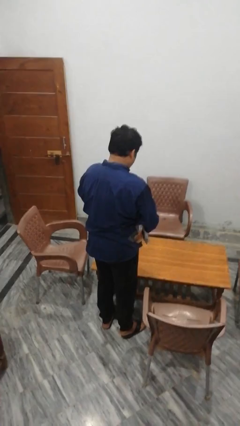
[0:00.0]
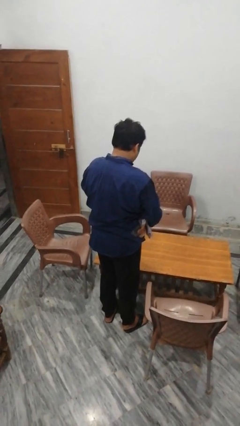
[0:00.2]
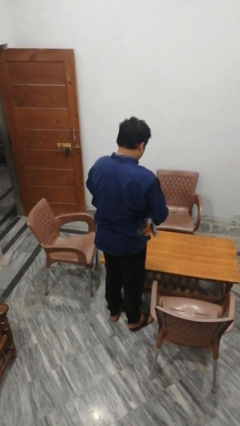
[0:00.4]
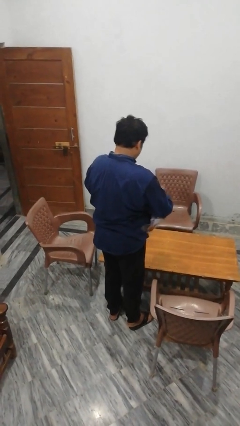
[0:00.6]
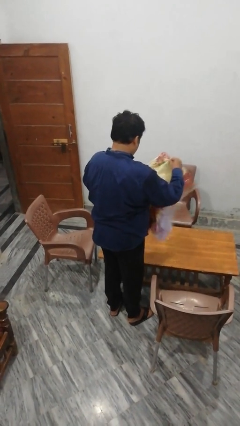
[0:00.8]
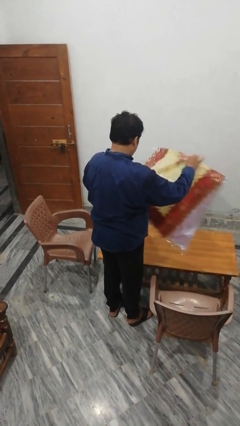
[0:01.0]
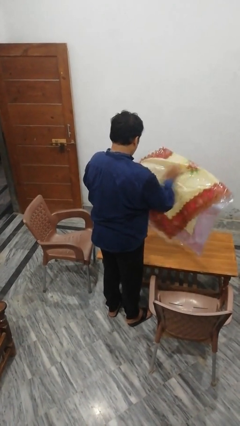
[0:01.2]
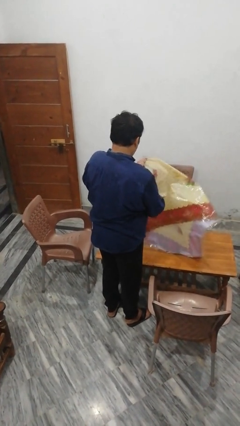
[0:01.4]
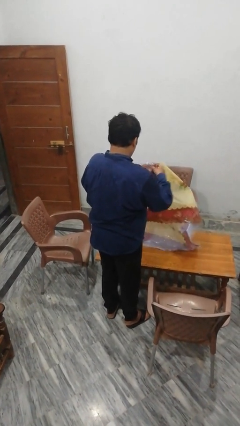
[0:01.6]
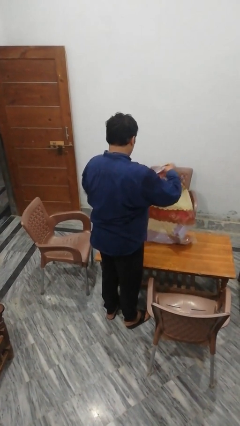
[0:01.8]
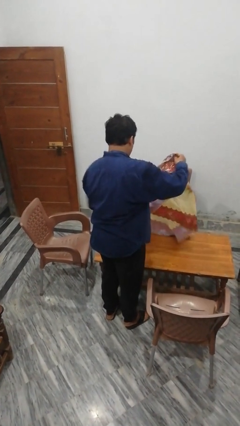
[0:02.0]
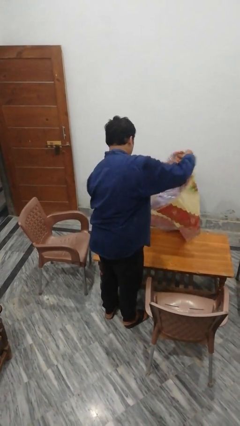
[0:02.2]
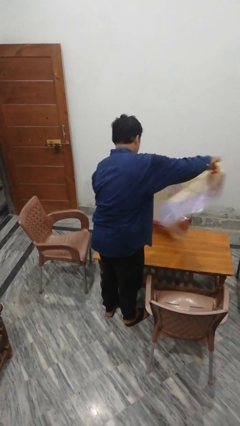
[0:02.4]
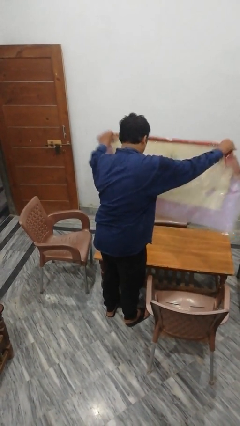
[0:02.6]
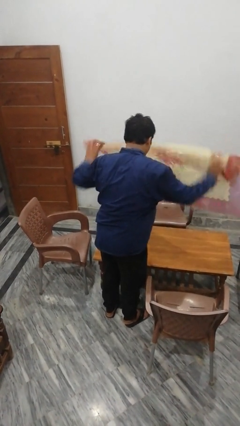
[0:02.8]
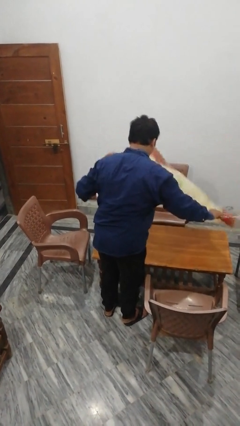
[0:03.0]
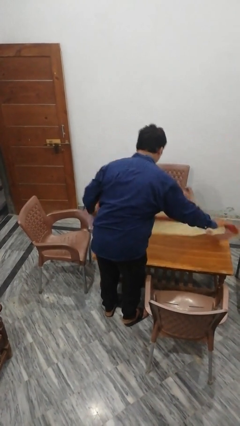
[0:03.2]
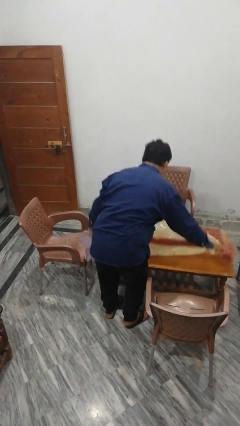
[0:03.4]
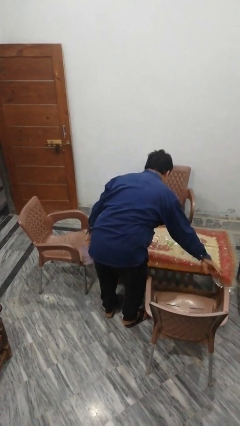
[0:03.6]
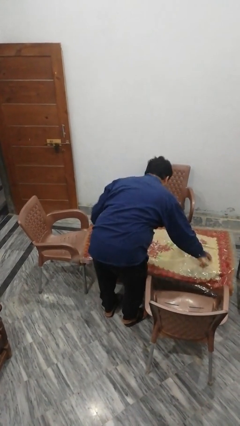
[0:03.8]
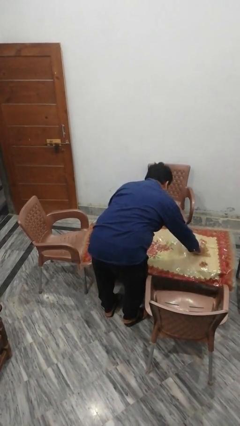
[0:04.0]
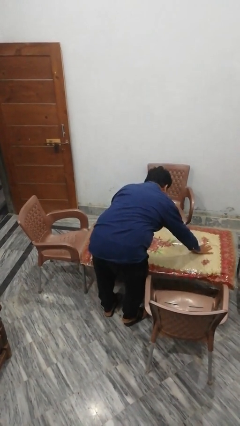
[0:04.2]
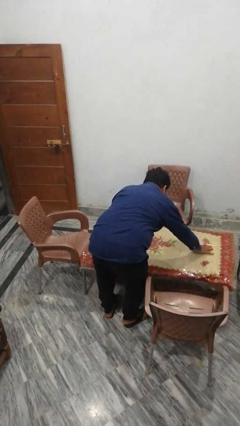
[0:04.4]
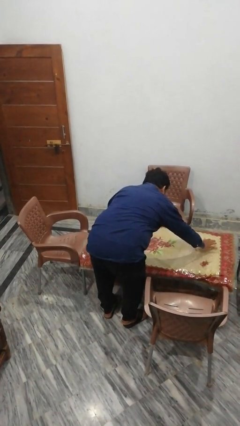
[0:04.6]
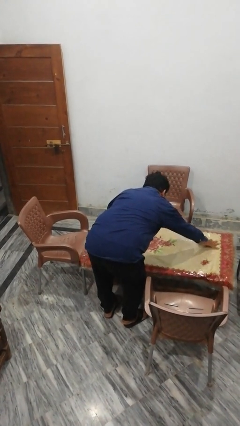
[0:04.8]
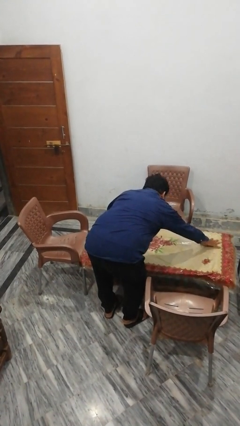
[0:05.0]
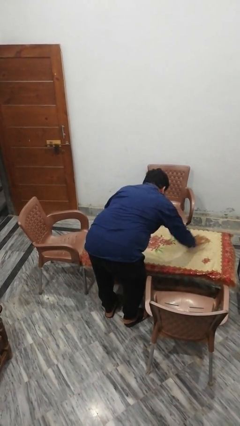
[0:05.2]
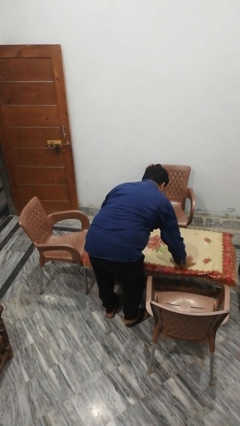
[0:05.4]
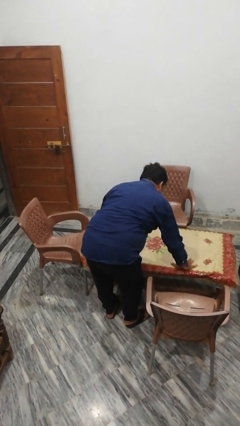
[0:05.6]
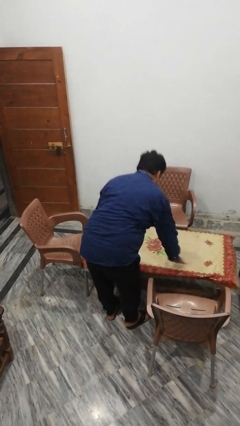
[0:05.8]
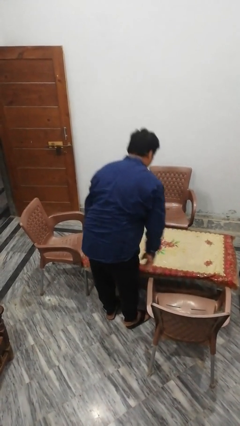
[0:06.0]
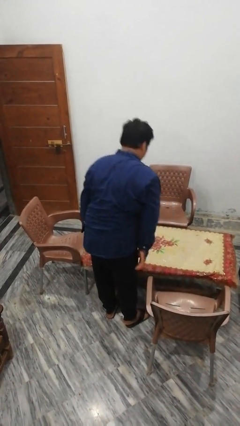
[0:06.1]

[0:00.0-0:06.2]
person spreads tablecloth

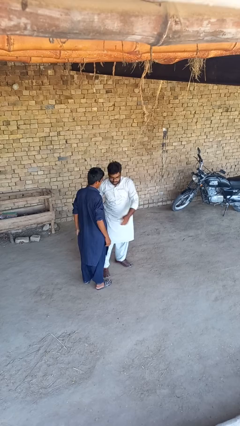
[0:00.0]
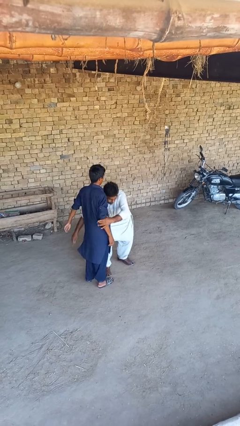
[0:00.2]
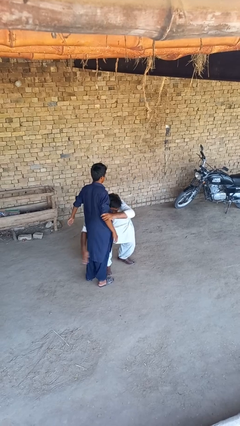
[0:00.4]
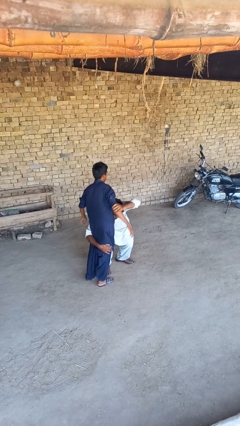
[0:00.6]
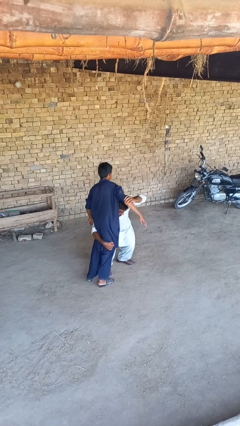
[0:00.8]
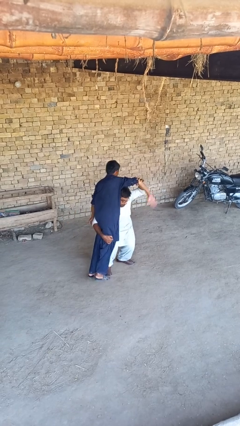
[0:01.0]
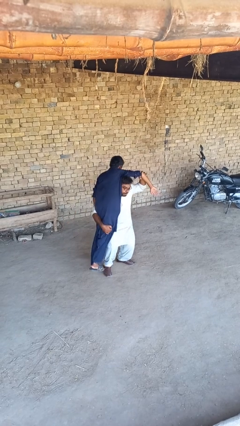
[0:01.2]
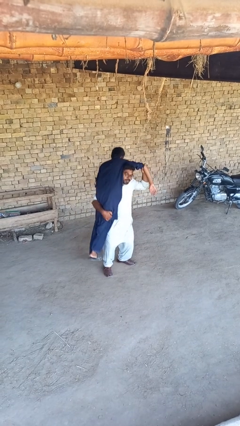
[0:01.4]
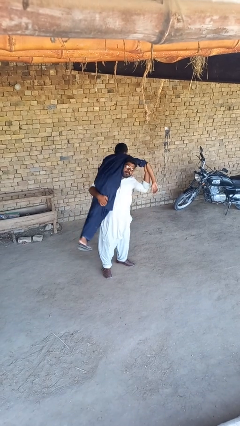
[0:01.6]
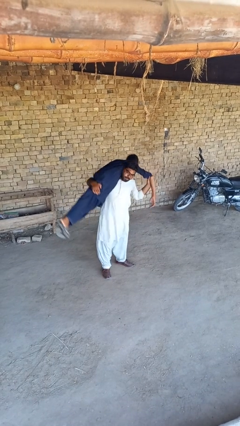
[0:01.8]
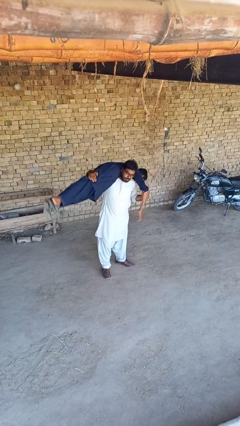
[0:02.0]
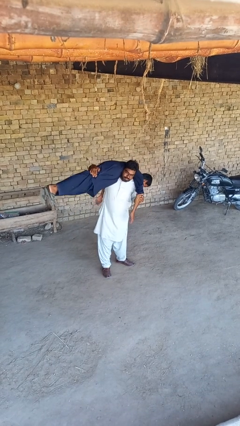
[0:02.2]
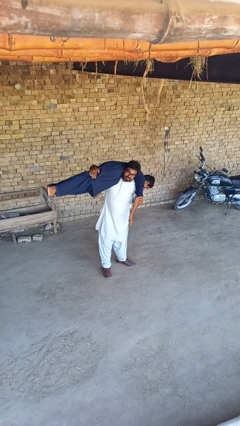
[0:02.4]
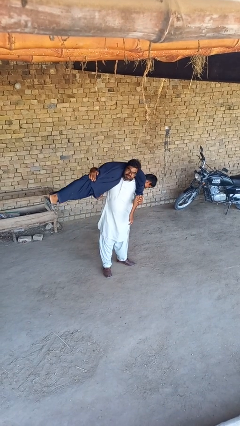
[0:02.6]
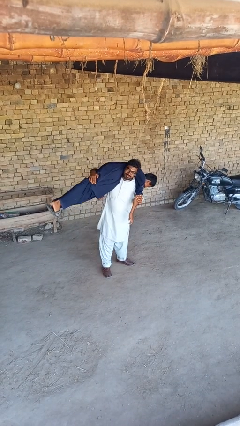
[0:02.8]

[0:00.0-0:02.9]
person carries person over shoulder

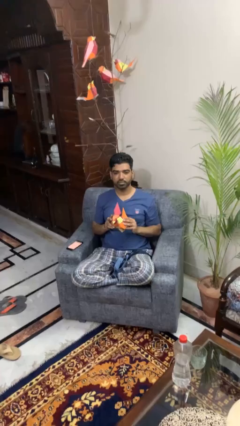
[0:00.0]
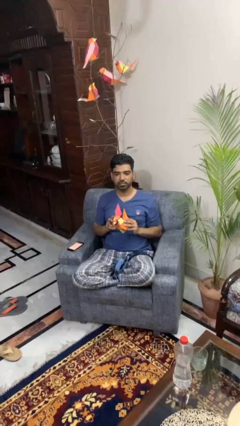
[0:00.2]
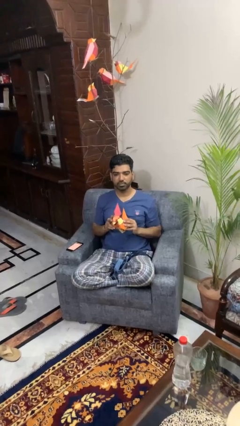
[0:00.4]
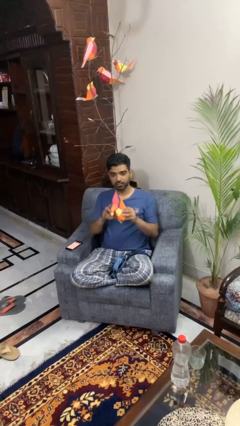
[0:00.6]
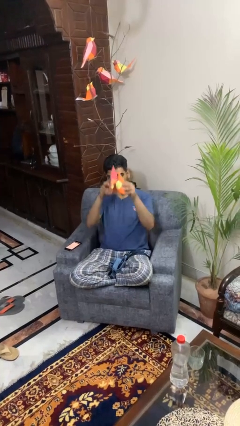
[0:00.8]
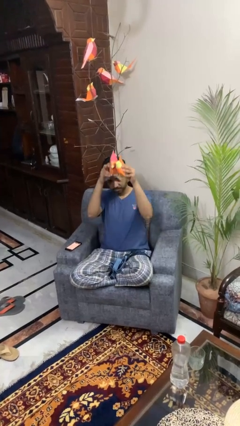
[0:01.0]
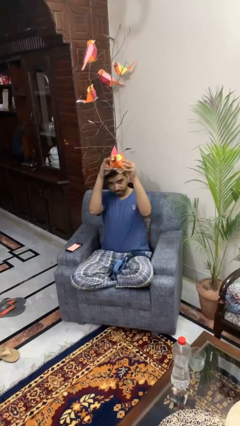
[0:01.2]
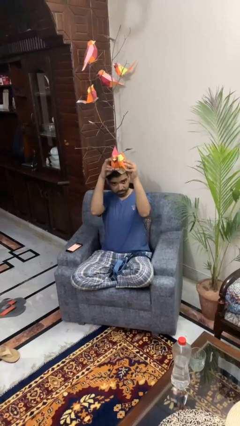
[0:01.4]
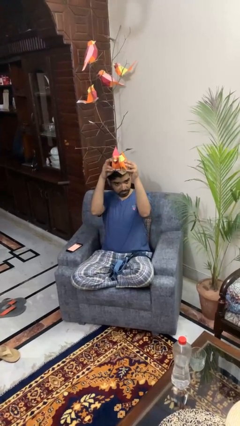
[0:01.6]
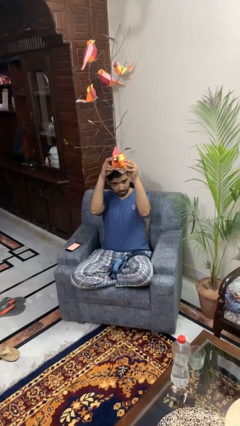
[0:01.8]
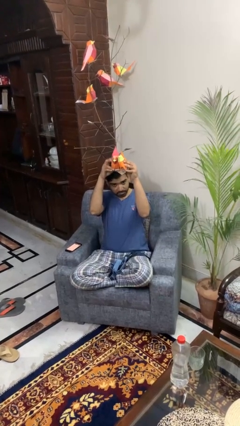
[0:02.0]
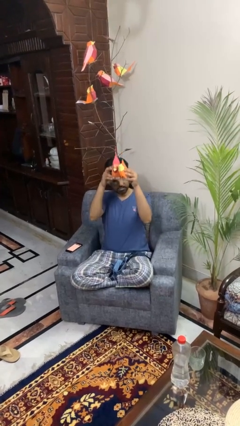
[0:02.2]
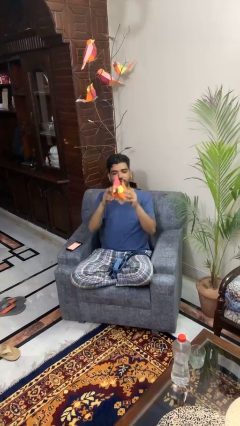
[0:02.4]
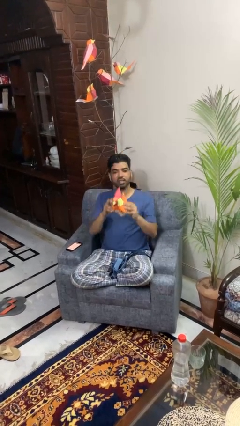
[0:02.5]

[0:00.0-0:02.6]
person holds object above head

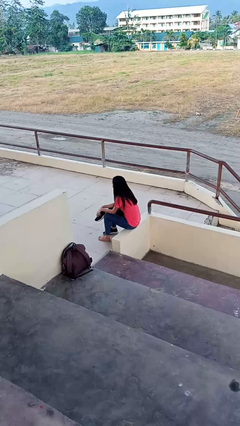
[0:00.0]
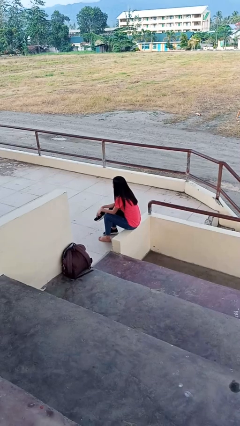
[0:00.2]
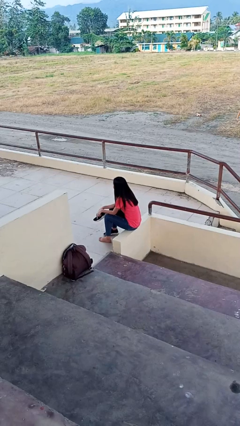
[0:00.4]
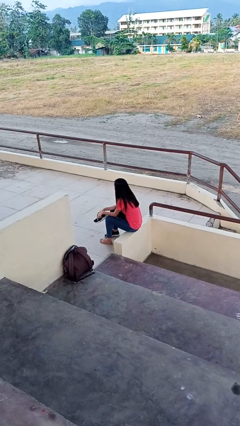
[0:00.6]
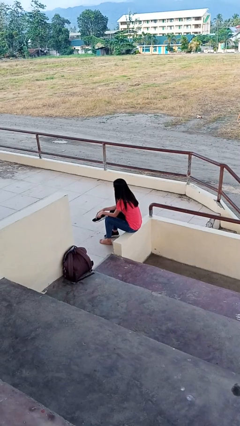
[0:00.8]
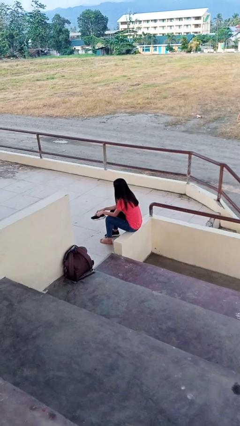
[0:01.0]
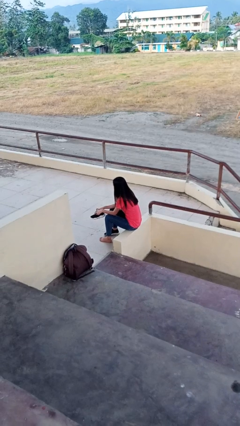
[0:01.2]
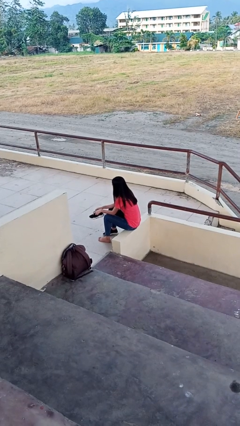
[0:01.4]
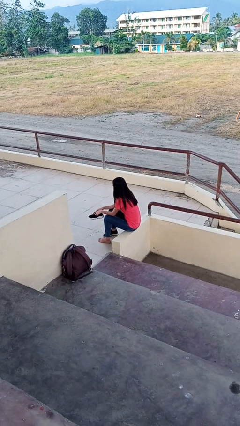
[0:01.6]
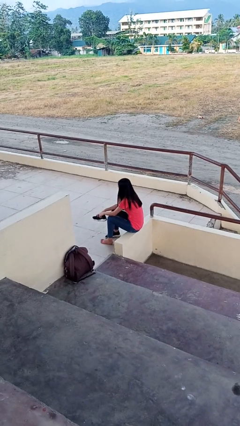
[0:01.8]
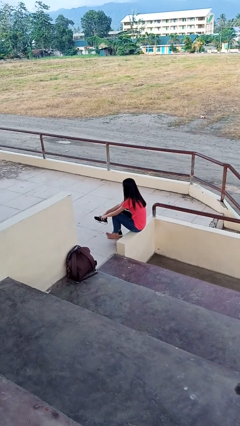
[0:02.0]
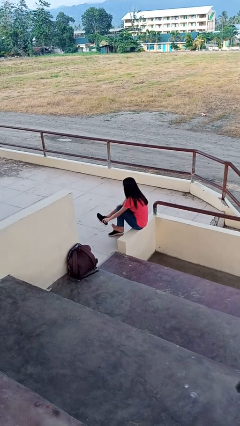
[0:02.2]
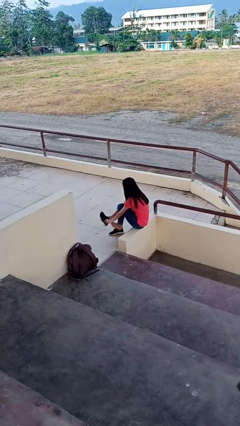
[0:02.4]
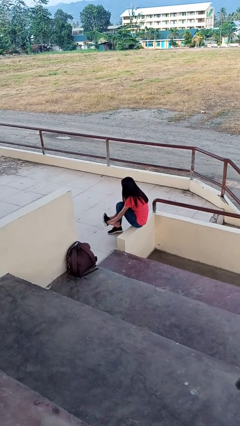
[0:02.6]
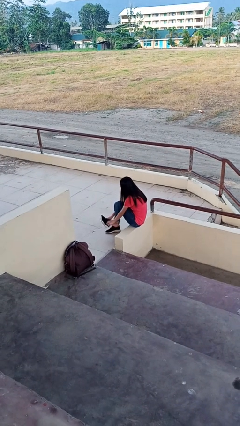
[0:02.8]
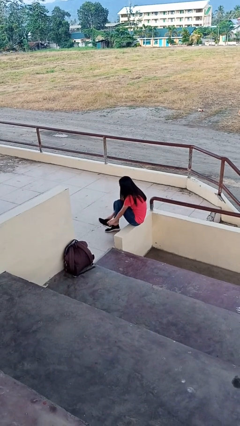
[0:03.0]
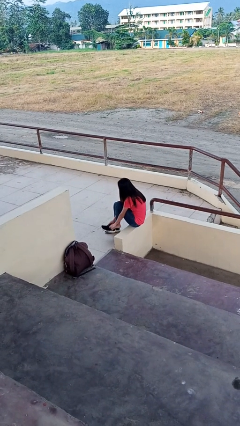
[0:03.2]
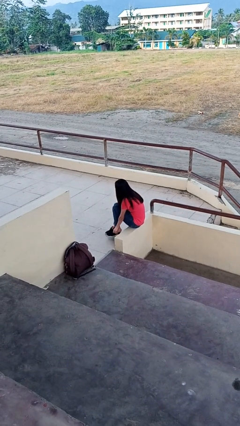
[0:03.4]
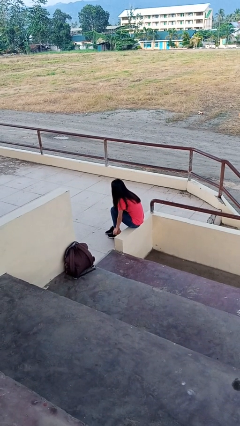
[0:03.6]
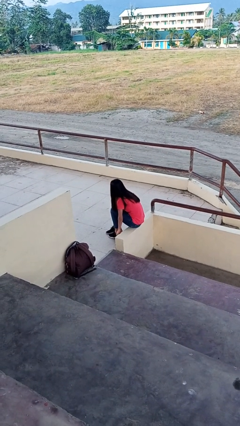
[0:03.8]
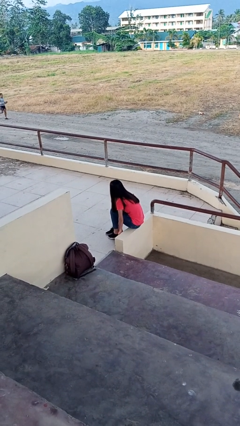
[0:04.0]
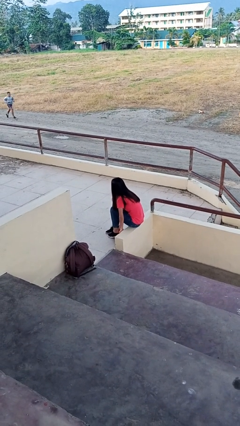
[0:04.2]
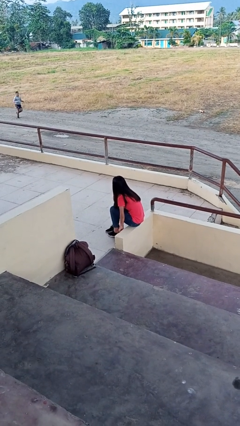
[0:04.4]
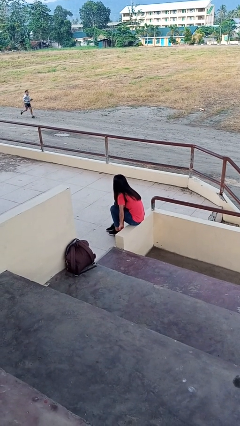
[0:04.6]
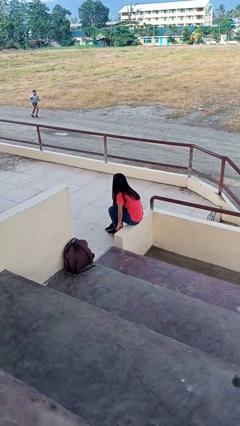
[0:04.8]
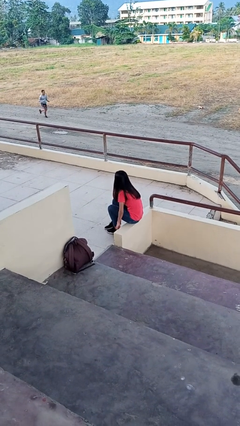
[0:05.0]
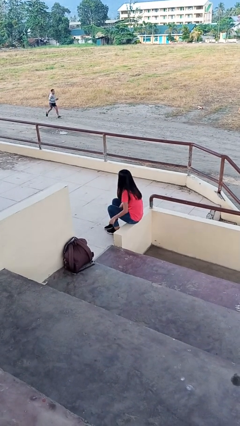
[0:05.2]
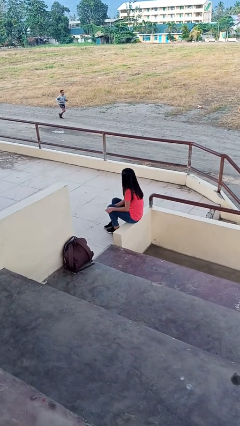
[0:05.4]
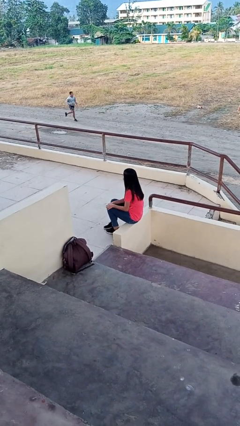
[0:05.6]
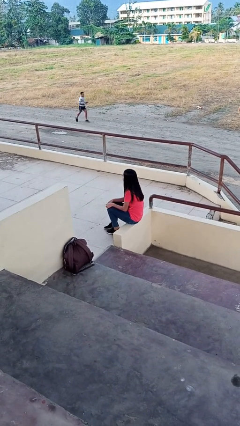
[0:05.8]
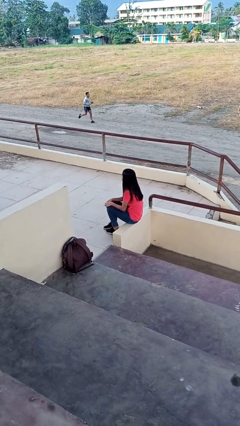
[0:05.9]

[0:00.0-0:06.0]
person puts on shoes
